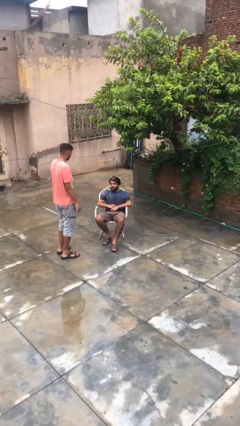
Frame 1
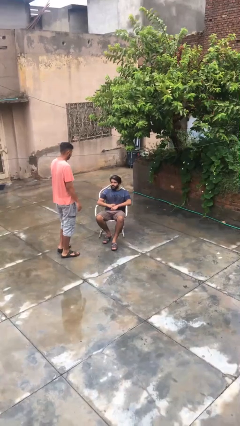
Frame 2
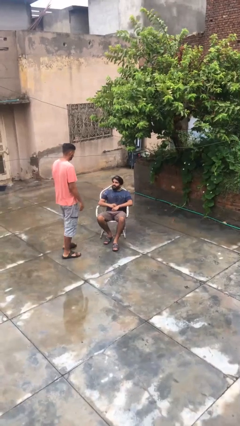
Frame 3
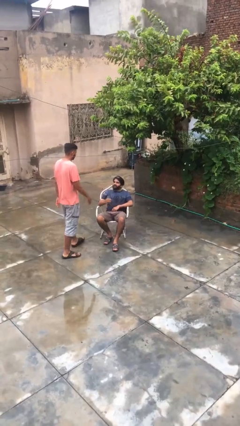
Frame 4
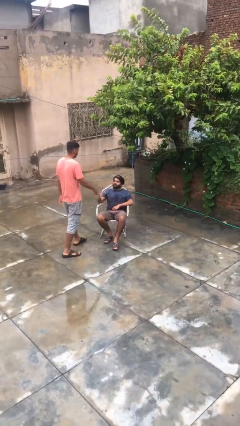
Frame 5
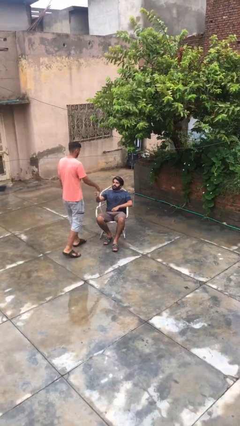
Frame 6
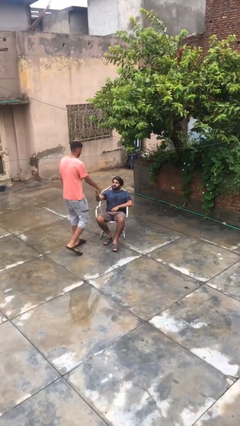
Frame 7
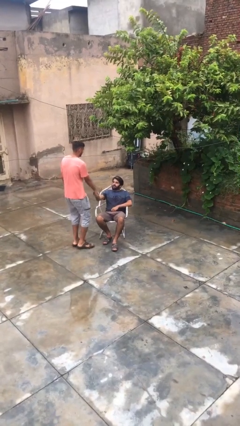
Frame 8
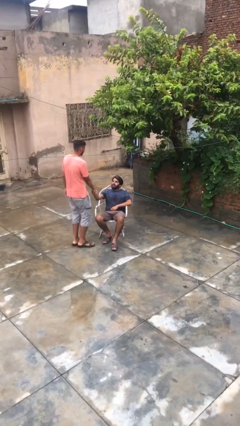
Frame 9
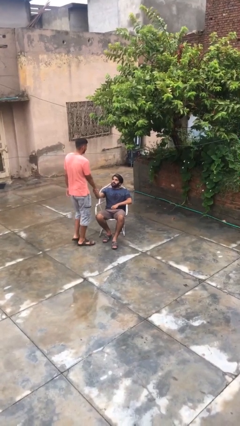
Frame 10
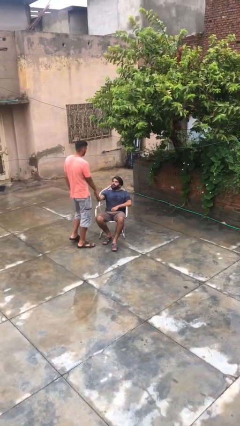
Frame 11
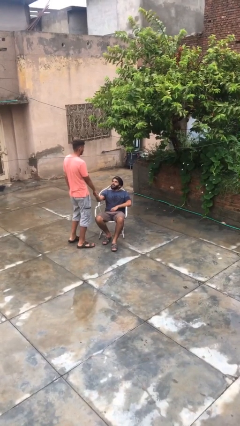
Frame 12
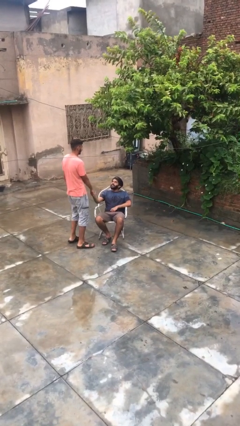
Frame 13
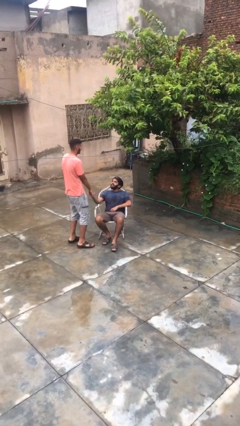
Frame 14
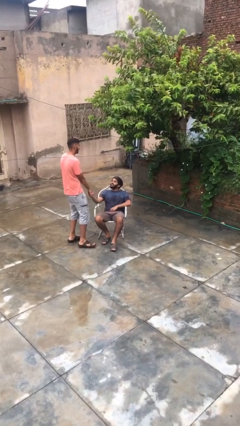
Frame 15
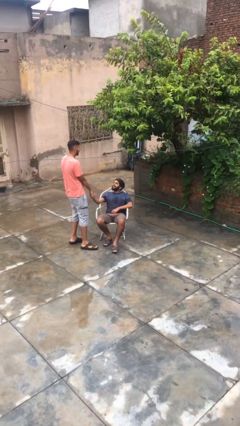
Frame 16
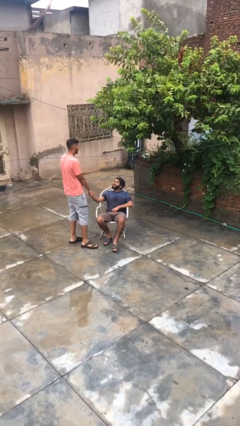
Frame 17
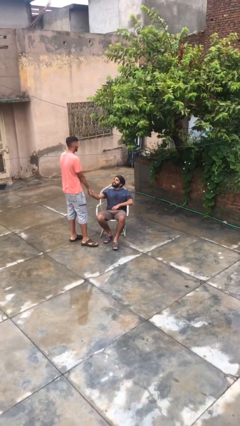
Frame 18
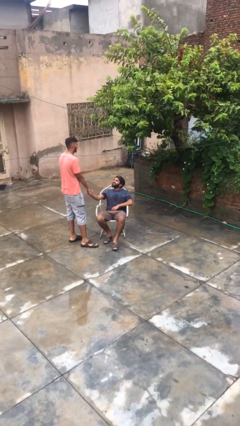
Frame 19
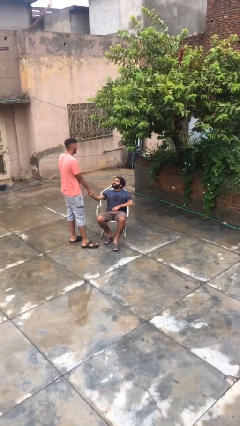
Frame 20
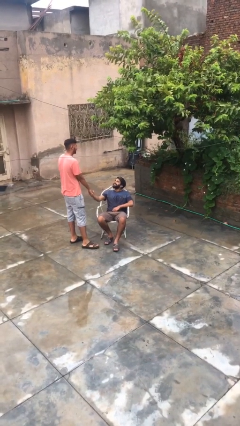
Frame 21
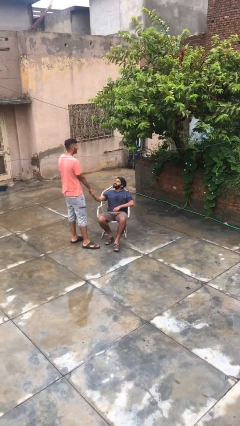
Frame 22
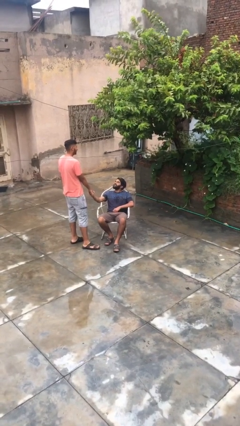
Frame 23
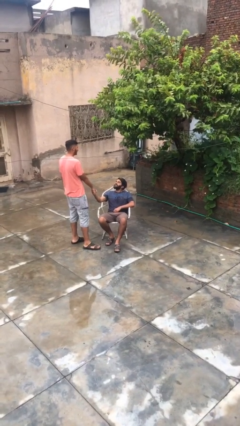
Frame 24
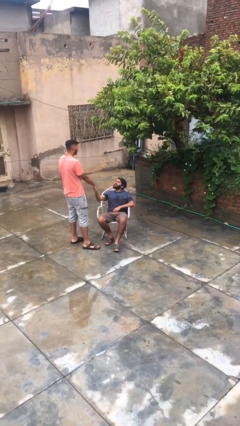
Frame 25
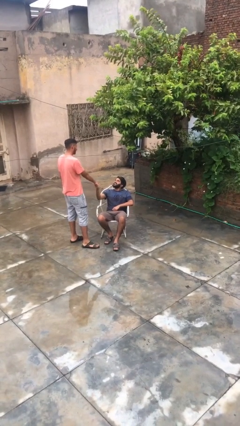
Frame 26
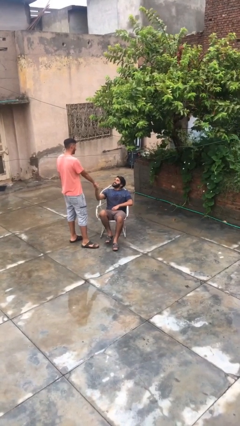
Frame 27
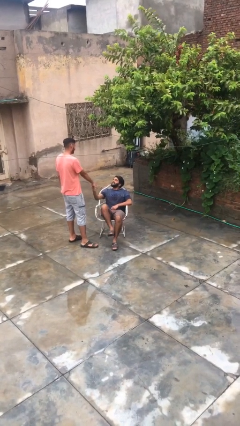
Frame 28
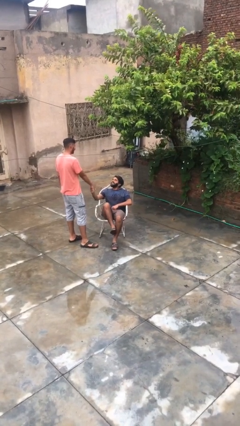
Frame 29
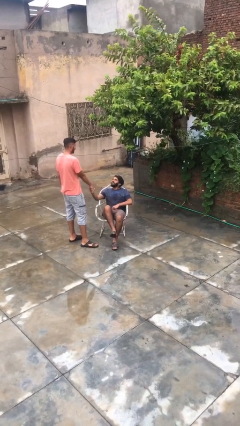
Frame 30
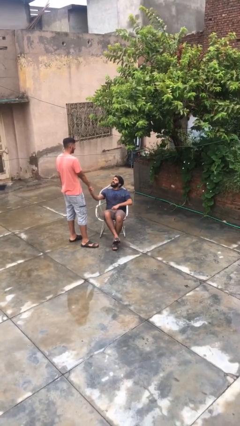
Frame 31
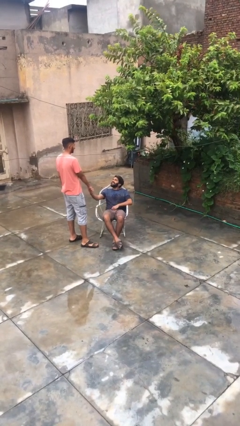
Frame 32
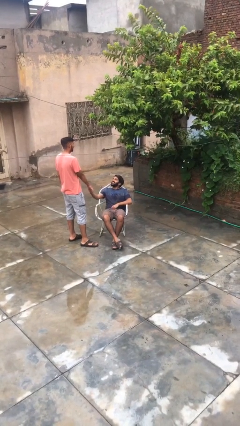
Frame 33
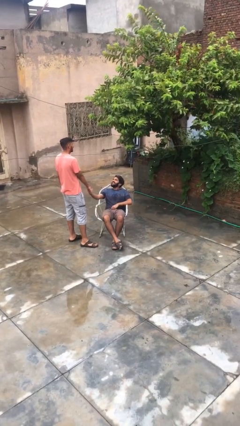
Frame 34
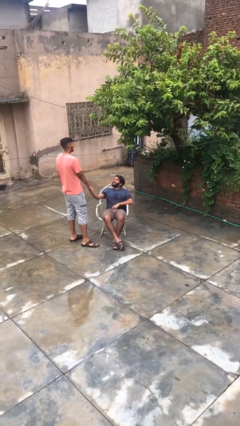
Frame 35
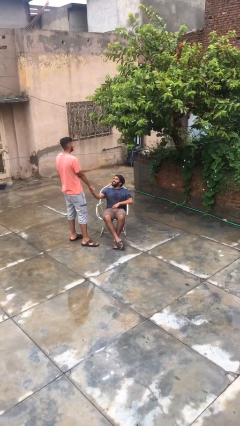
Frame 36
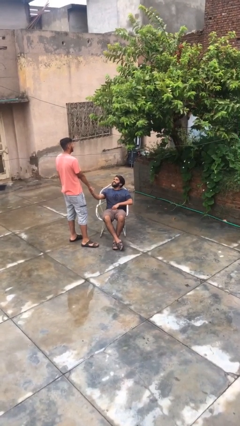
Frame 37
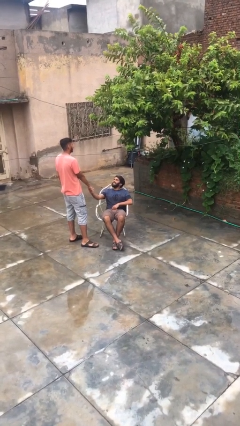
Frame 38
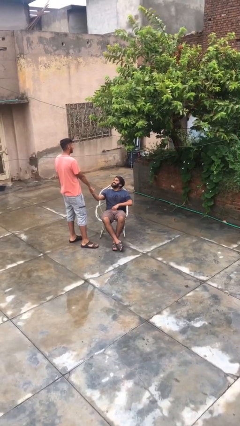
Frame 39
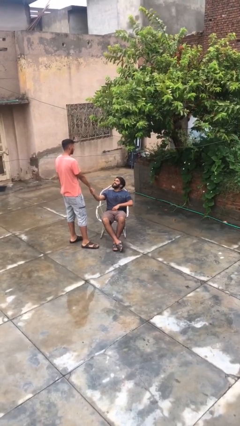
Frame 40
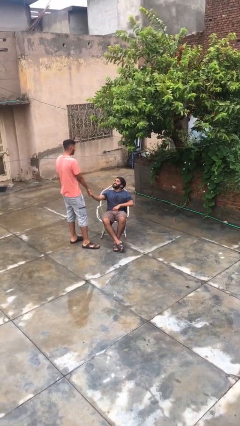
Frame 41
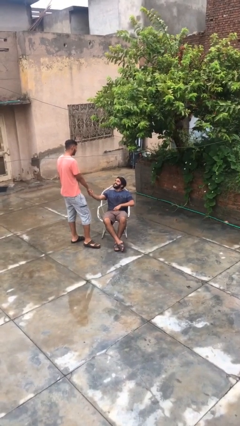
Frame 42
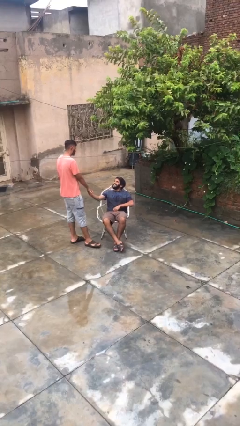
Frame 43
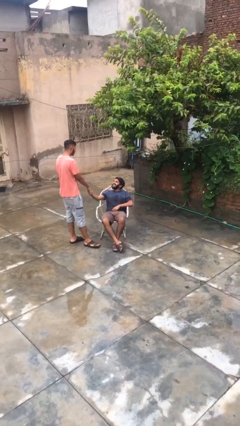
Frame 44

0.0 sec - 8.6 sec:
person shakes hand

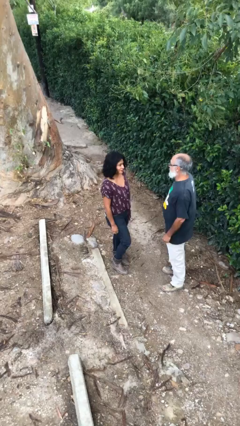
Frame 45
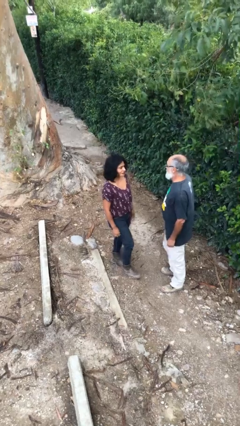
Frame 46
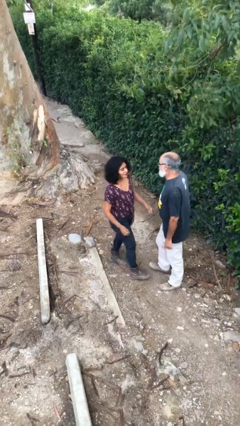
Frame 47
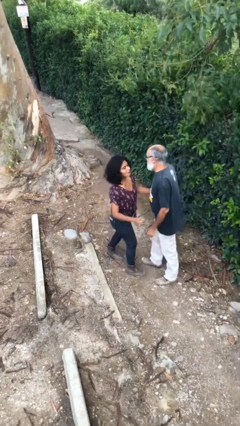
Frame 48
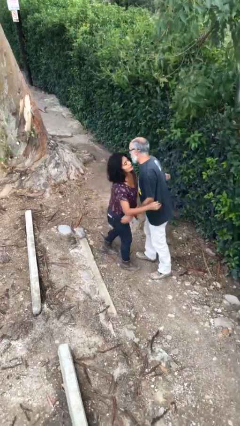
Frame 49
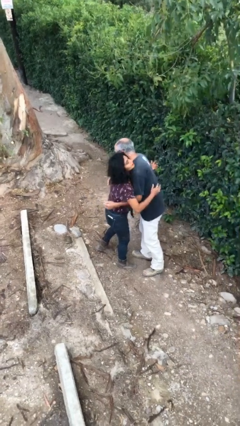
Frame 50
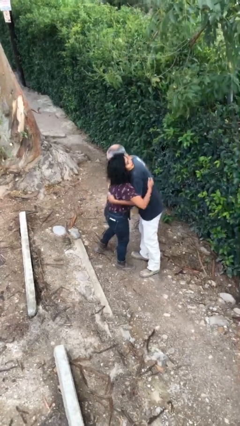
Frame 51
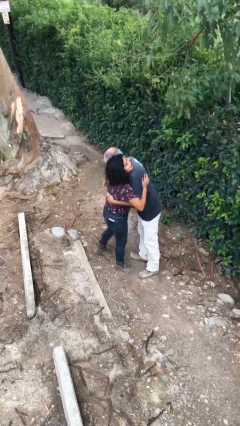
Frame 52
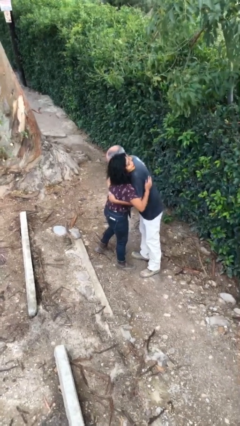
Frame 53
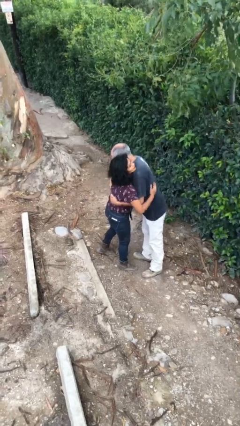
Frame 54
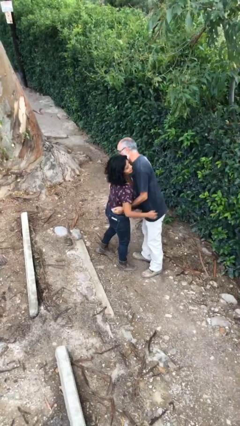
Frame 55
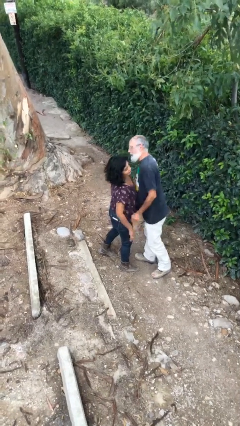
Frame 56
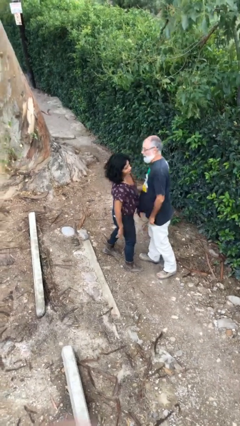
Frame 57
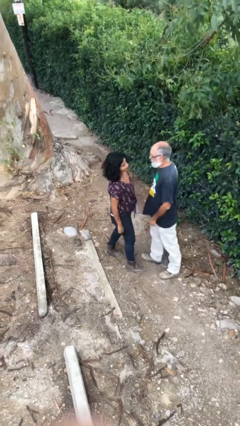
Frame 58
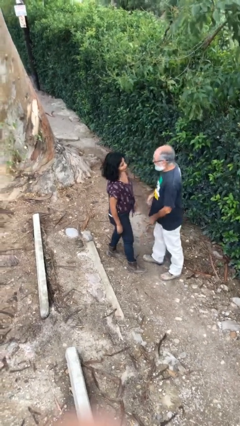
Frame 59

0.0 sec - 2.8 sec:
person embraces person

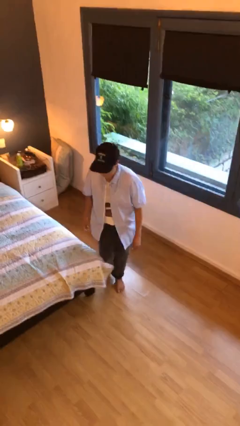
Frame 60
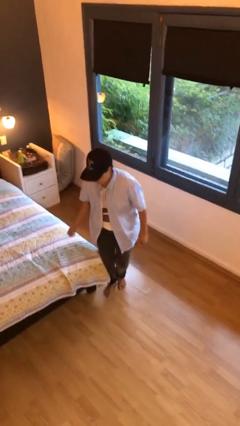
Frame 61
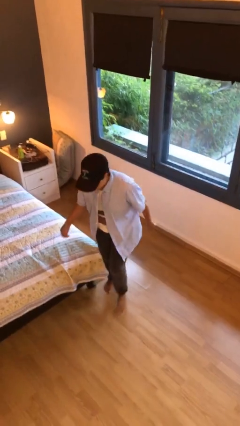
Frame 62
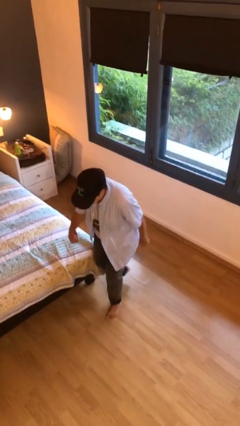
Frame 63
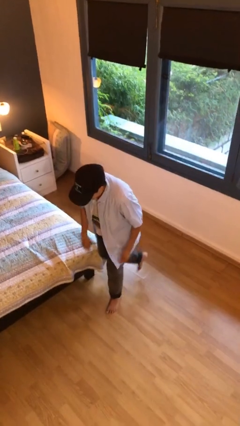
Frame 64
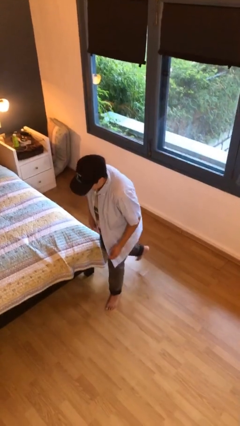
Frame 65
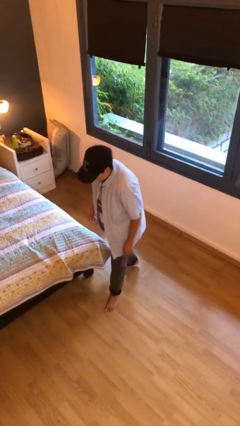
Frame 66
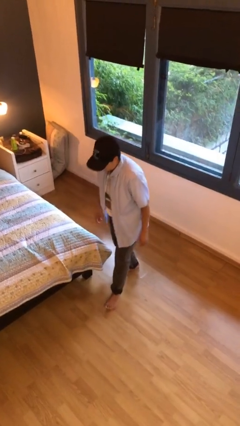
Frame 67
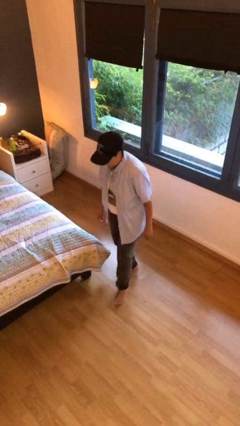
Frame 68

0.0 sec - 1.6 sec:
person stubs toe

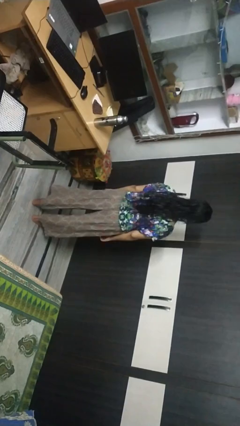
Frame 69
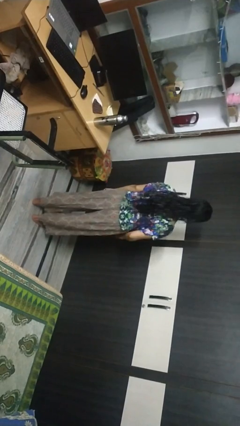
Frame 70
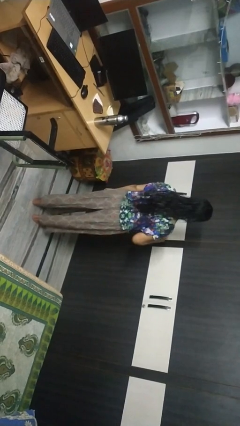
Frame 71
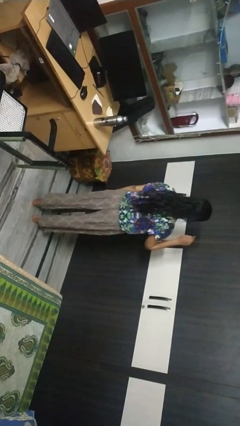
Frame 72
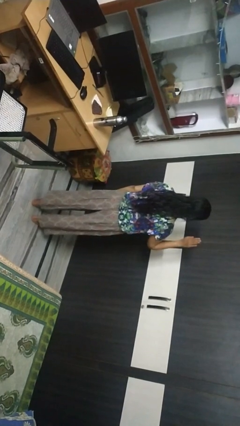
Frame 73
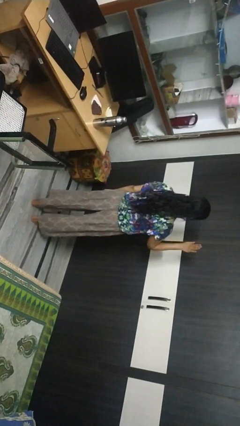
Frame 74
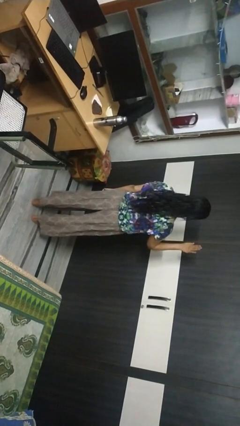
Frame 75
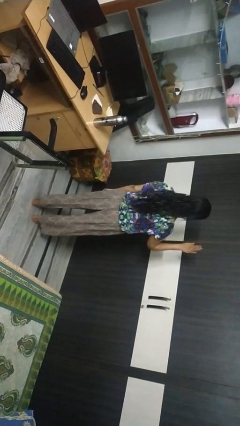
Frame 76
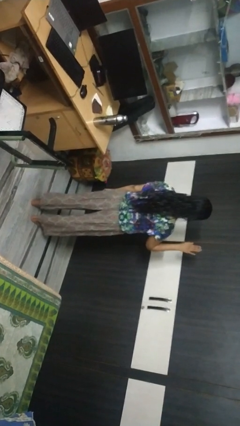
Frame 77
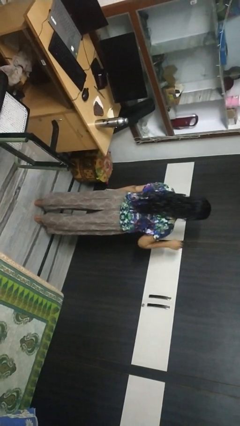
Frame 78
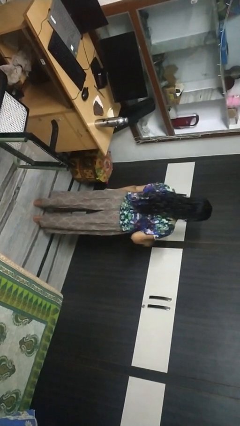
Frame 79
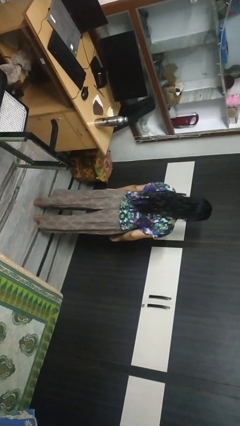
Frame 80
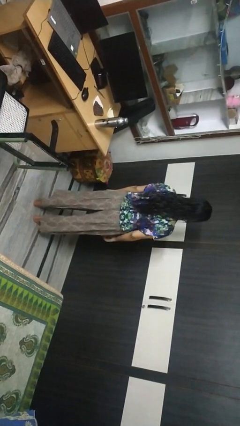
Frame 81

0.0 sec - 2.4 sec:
person gestures stop

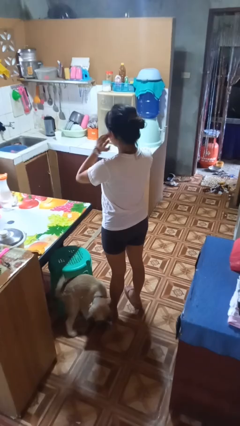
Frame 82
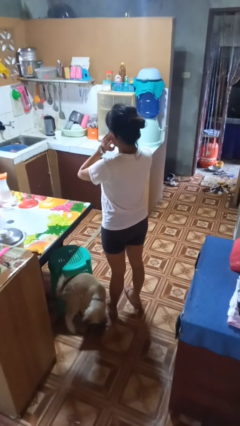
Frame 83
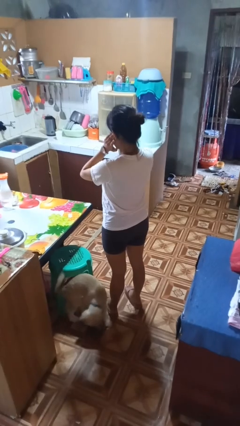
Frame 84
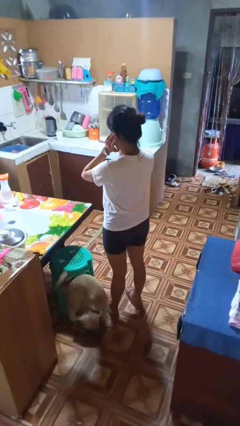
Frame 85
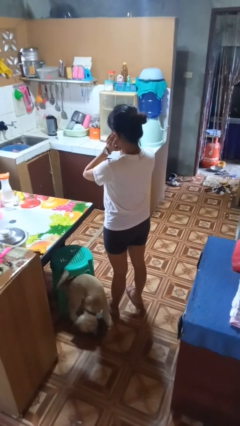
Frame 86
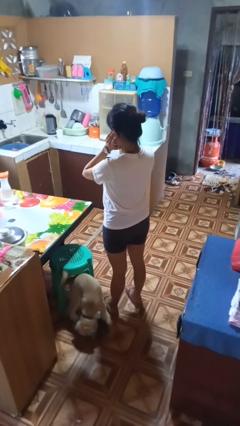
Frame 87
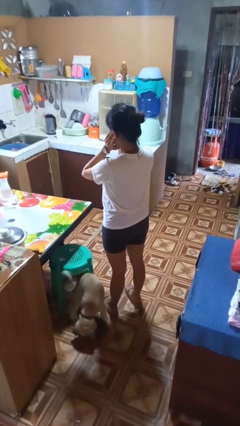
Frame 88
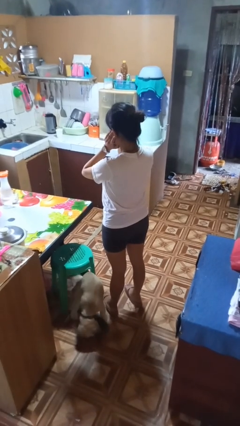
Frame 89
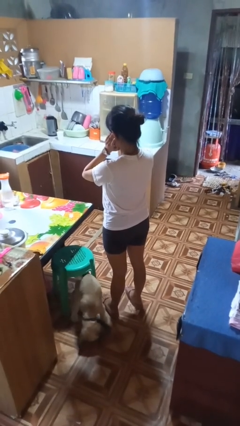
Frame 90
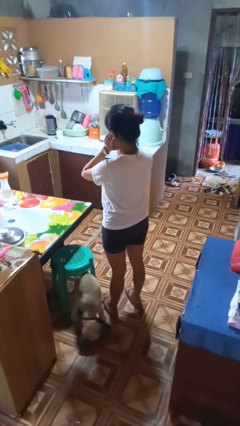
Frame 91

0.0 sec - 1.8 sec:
person puts fingers in ear
